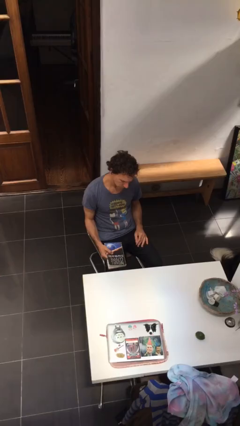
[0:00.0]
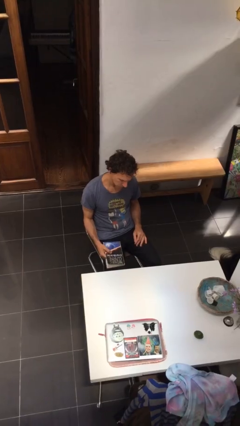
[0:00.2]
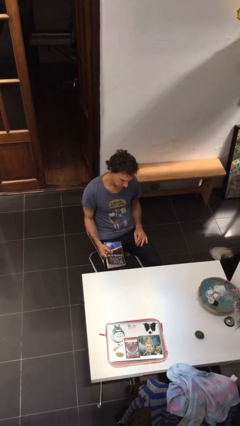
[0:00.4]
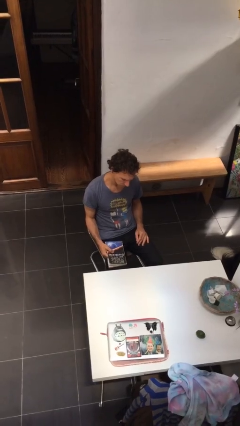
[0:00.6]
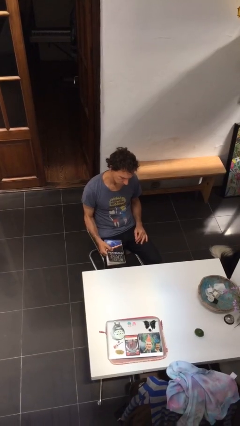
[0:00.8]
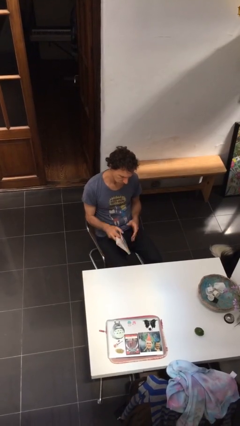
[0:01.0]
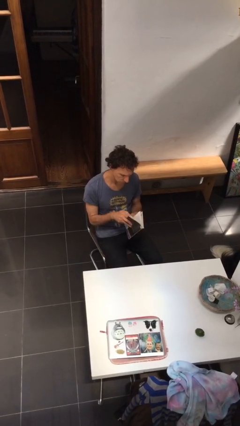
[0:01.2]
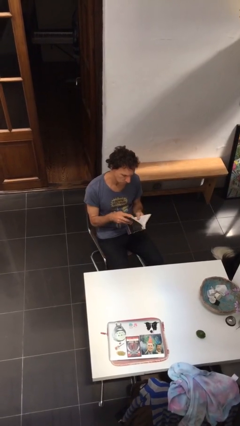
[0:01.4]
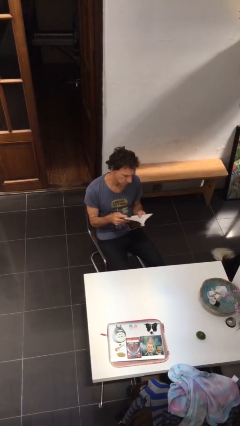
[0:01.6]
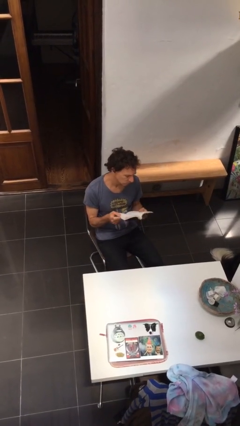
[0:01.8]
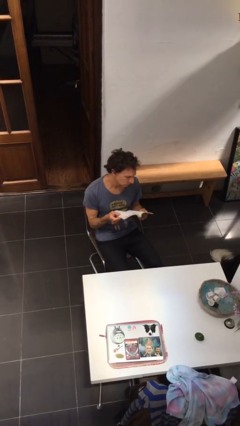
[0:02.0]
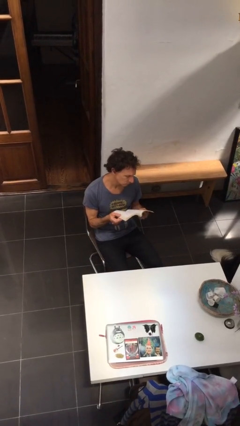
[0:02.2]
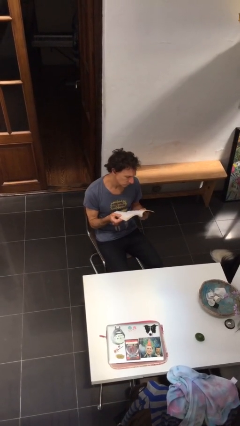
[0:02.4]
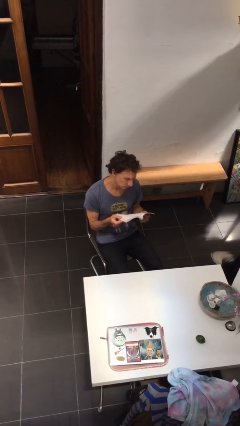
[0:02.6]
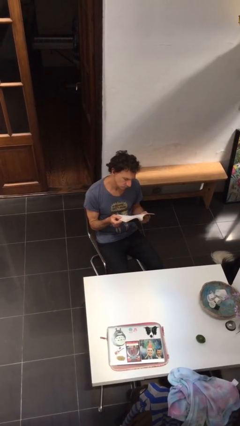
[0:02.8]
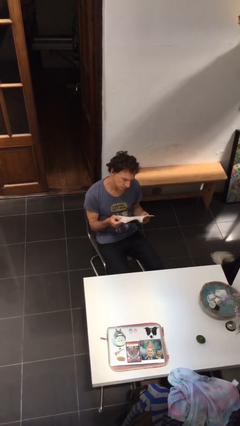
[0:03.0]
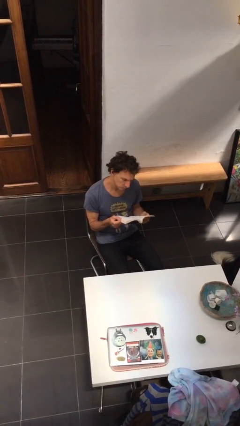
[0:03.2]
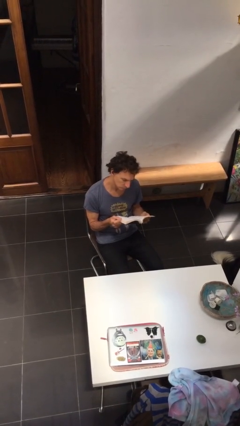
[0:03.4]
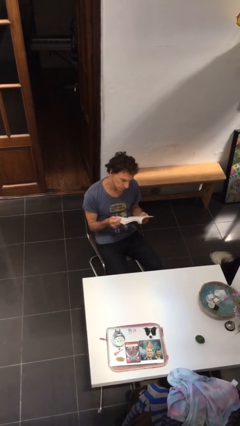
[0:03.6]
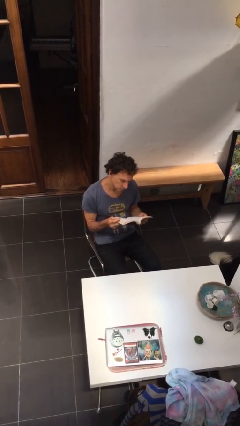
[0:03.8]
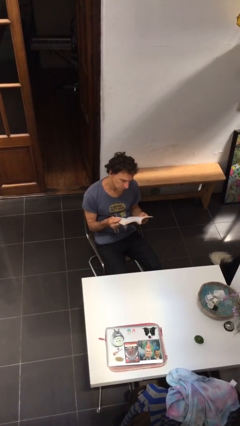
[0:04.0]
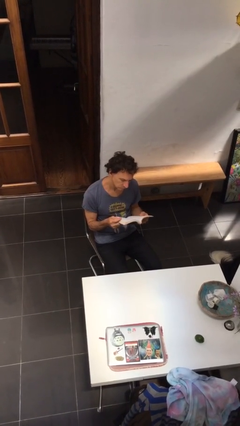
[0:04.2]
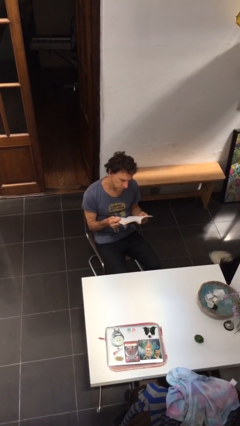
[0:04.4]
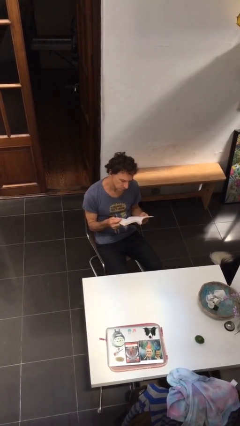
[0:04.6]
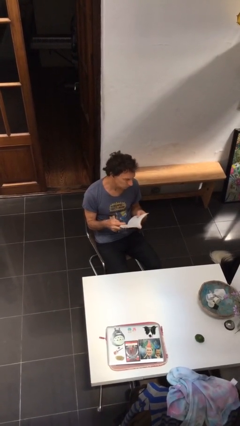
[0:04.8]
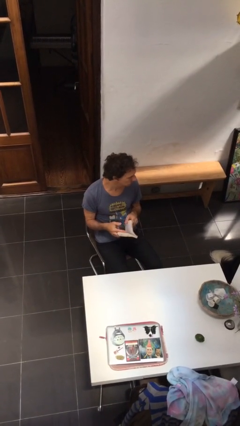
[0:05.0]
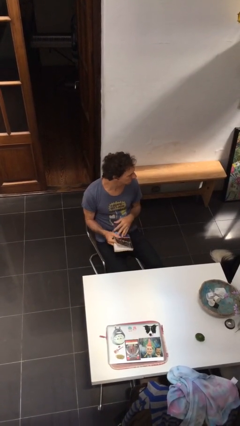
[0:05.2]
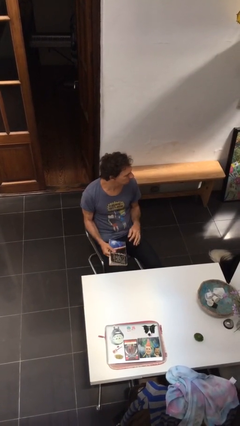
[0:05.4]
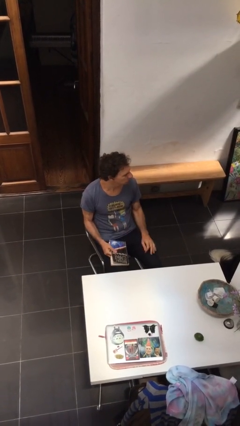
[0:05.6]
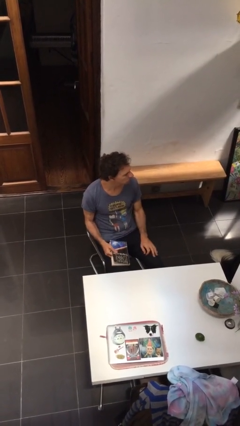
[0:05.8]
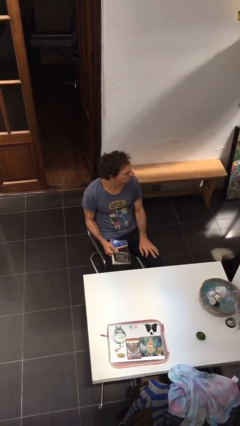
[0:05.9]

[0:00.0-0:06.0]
person reads document

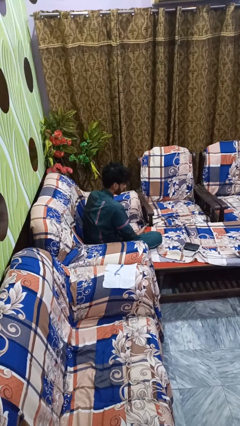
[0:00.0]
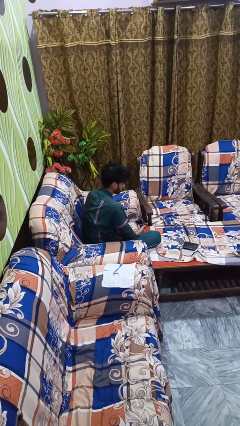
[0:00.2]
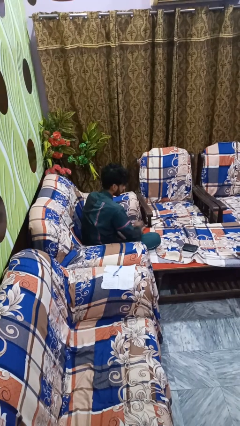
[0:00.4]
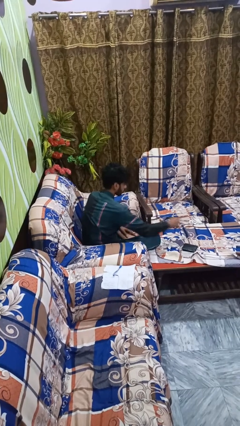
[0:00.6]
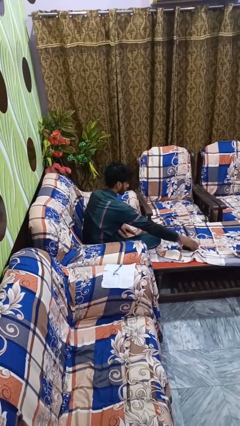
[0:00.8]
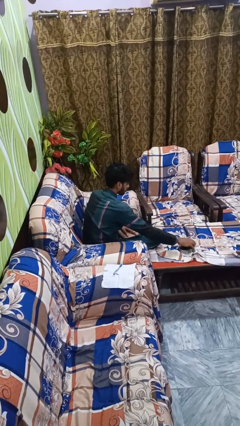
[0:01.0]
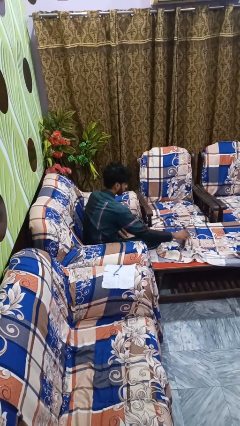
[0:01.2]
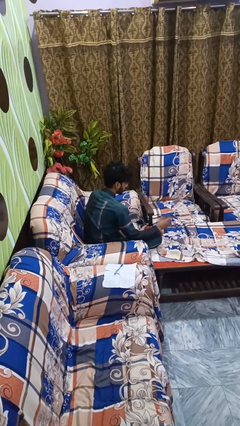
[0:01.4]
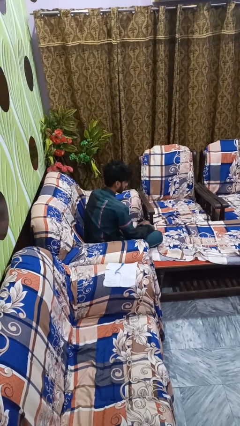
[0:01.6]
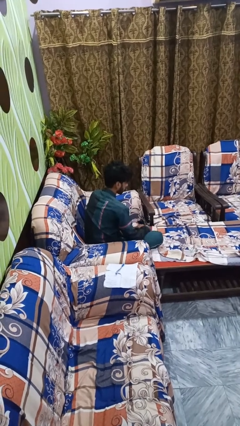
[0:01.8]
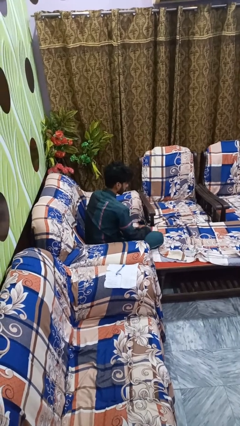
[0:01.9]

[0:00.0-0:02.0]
person picks up object from floor

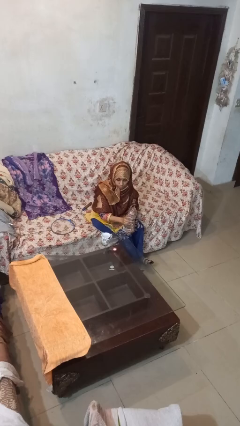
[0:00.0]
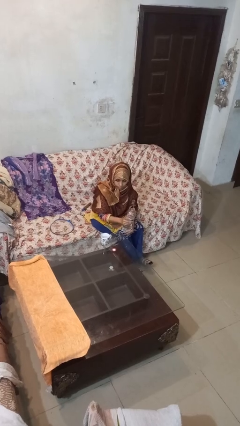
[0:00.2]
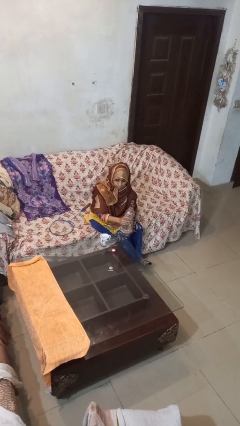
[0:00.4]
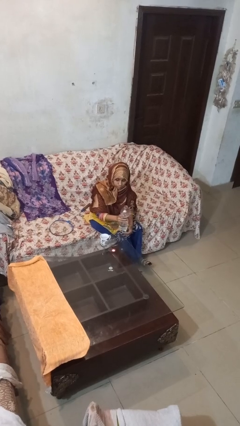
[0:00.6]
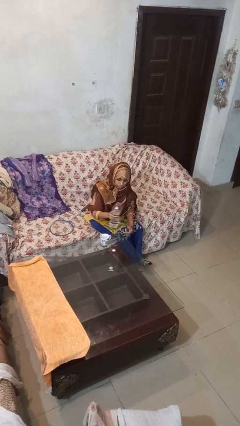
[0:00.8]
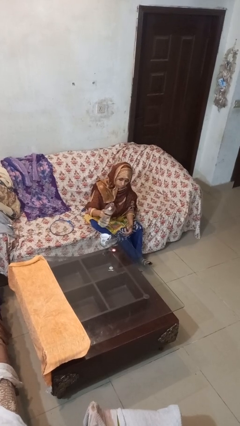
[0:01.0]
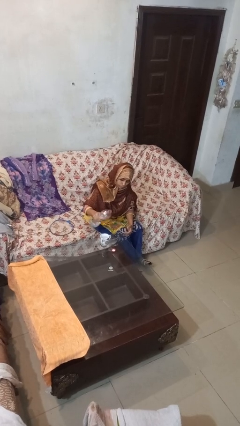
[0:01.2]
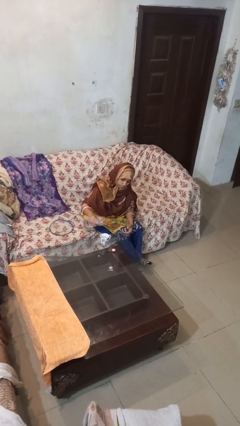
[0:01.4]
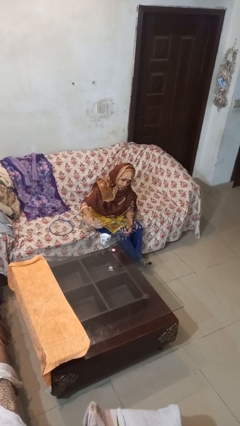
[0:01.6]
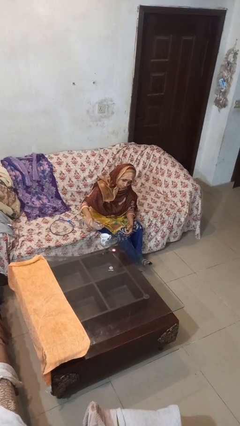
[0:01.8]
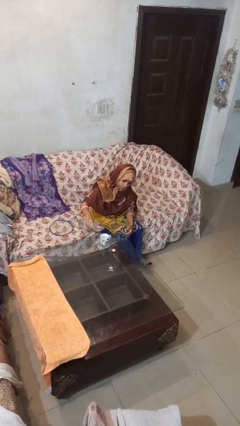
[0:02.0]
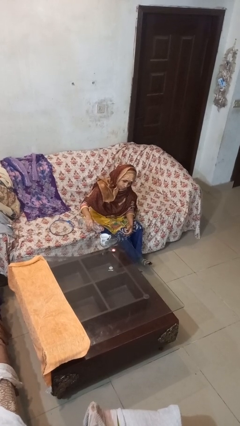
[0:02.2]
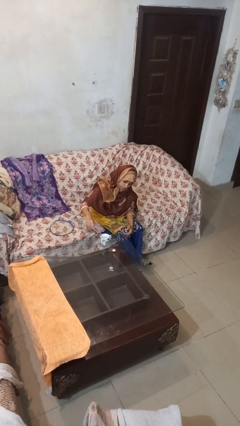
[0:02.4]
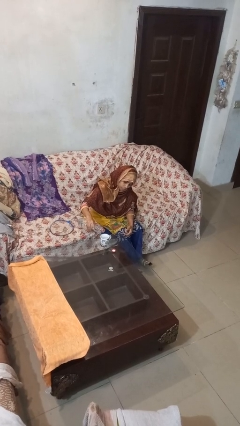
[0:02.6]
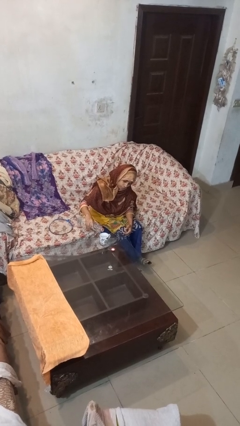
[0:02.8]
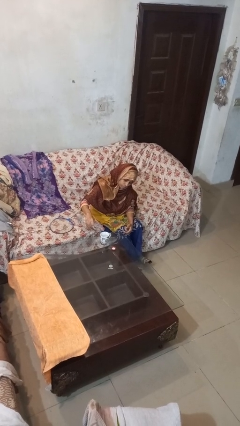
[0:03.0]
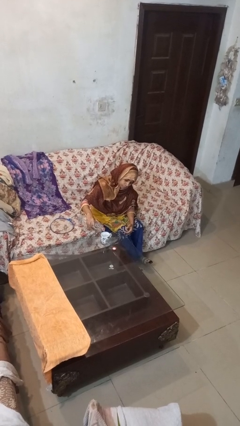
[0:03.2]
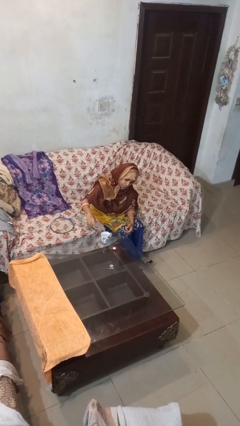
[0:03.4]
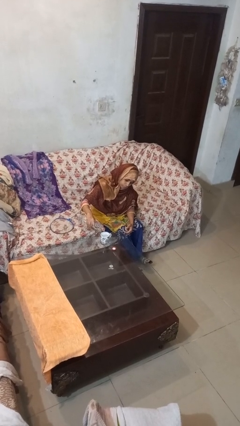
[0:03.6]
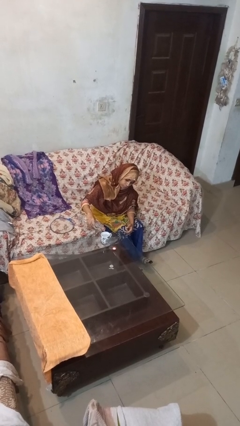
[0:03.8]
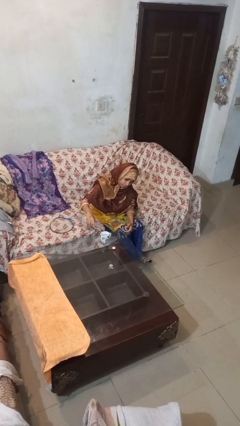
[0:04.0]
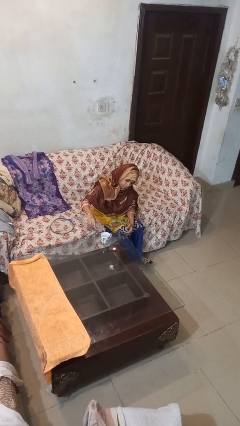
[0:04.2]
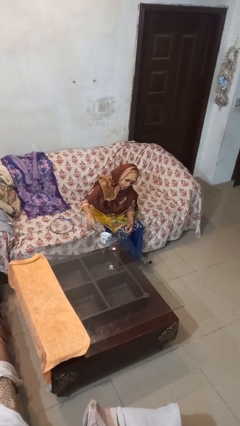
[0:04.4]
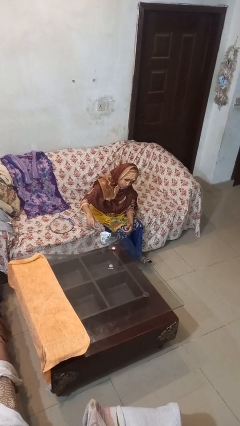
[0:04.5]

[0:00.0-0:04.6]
person pours liquid into cup

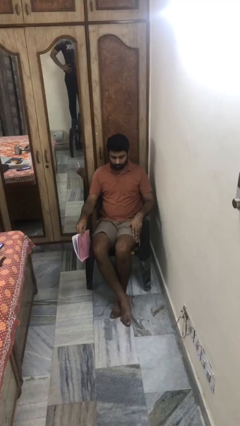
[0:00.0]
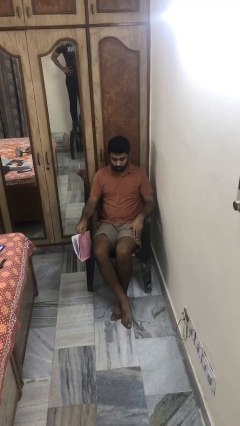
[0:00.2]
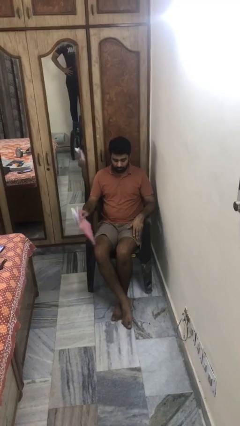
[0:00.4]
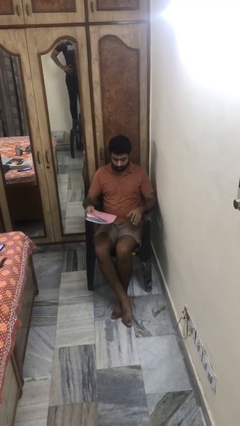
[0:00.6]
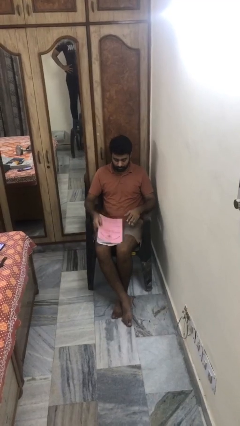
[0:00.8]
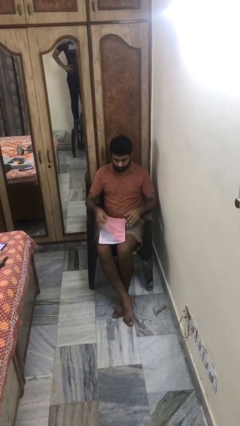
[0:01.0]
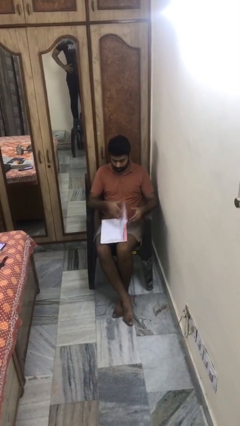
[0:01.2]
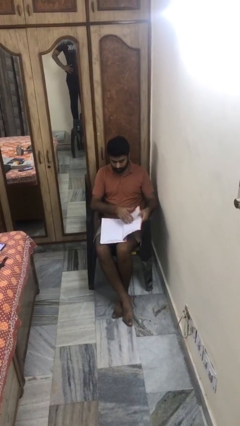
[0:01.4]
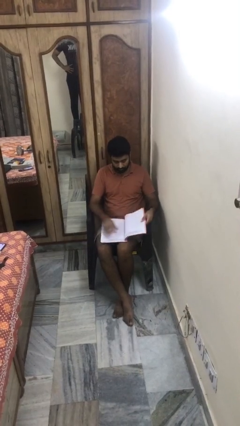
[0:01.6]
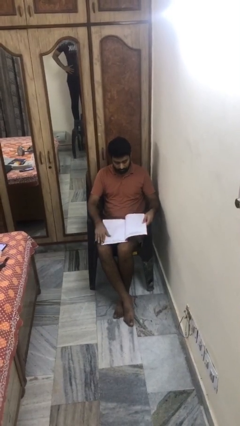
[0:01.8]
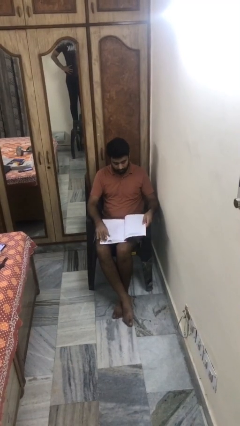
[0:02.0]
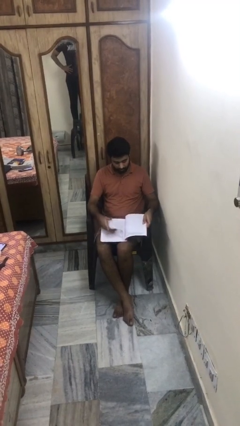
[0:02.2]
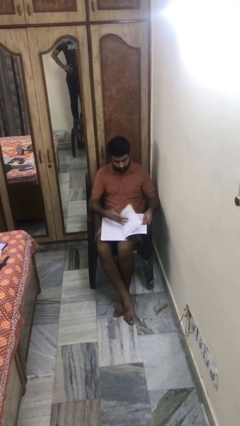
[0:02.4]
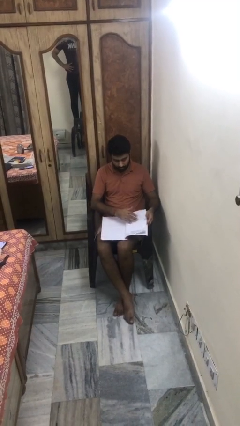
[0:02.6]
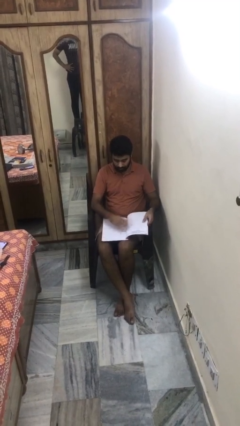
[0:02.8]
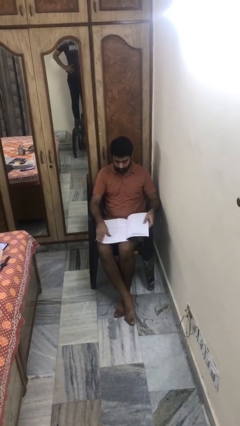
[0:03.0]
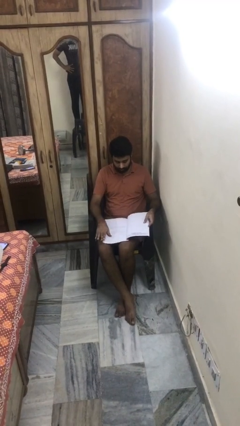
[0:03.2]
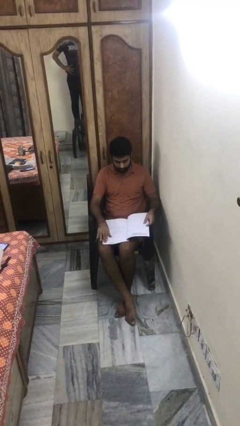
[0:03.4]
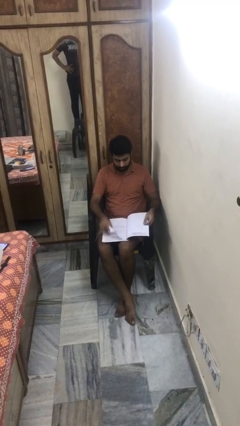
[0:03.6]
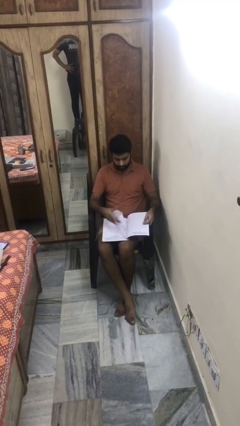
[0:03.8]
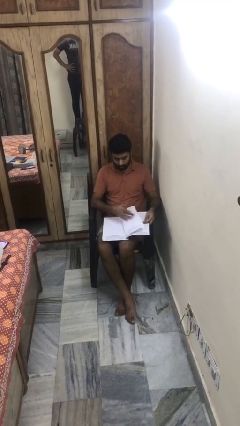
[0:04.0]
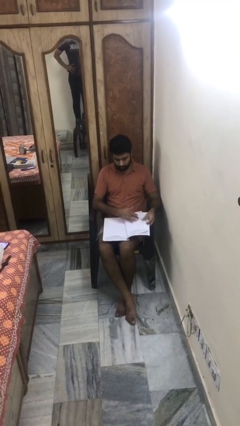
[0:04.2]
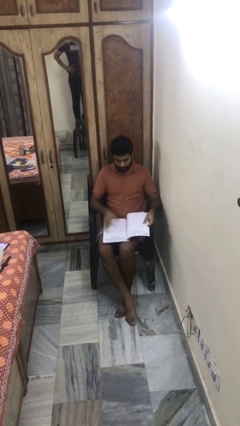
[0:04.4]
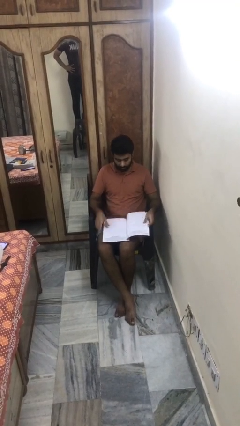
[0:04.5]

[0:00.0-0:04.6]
person reads magazine

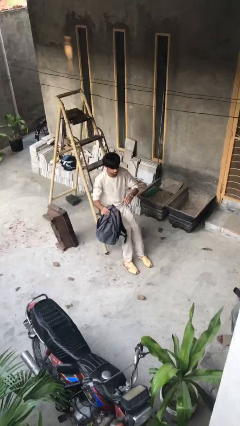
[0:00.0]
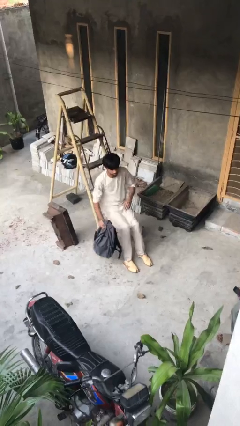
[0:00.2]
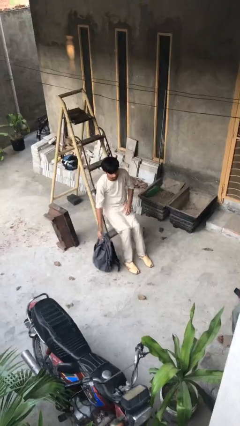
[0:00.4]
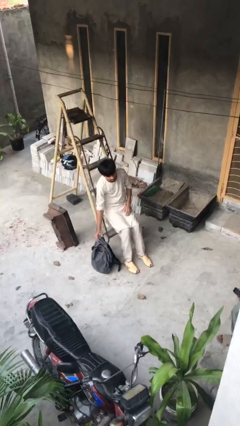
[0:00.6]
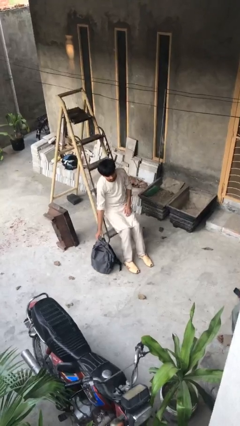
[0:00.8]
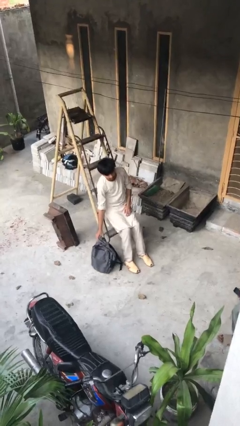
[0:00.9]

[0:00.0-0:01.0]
person puts down object on floor
